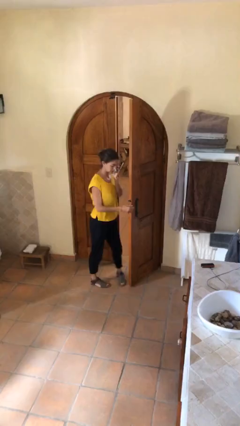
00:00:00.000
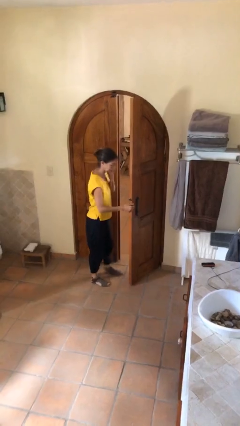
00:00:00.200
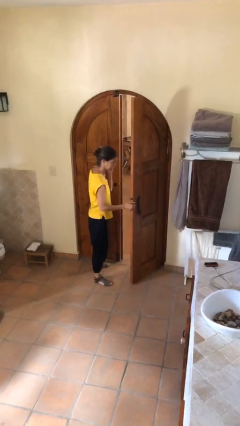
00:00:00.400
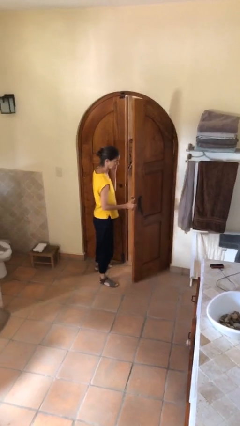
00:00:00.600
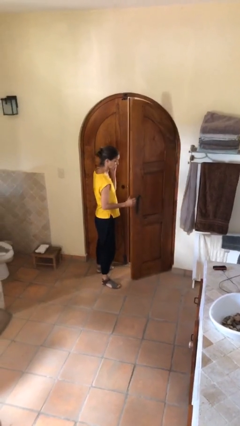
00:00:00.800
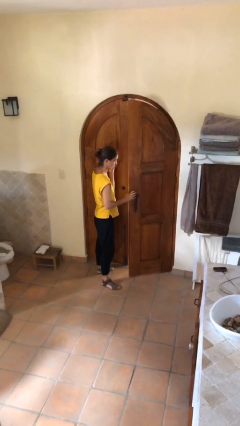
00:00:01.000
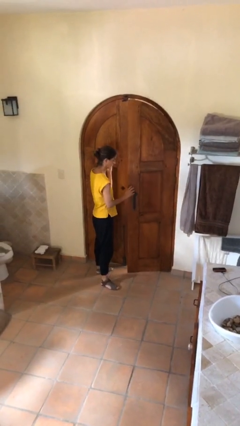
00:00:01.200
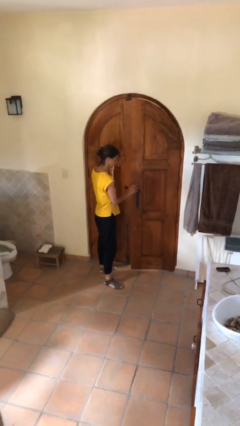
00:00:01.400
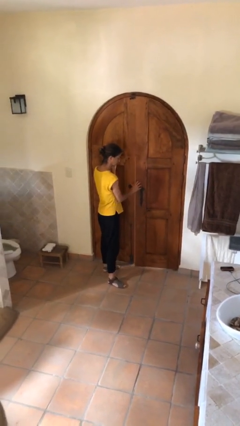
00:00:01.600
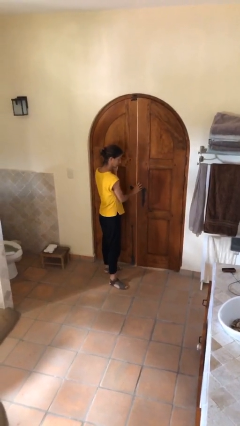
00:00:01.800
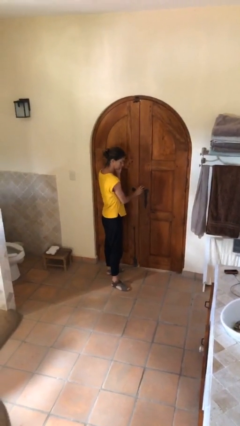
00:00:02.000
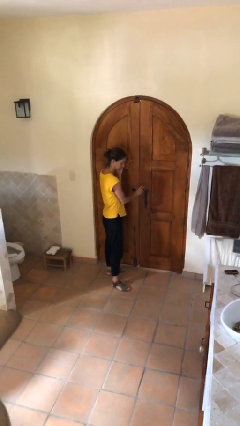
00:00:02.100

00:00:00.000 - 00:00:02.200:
person closes facility door

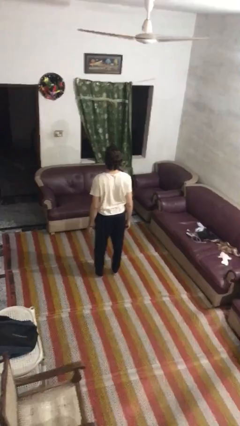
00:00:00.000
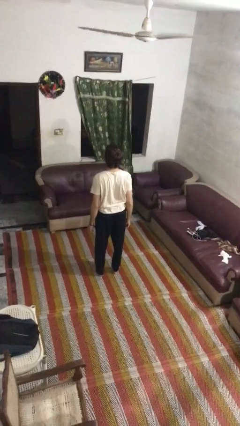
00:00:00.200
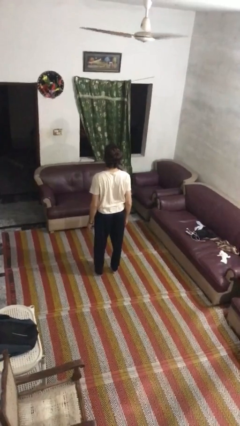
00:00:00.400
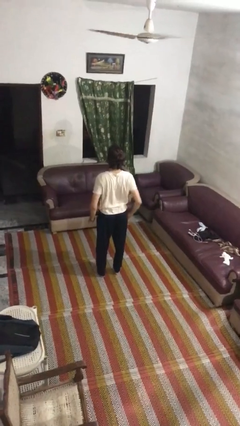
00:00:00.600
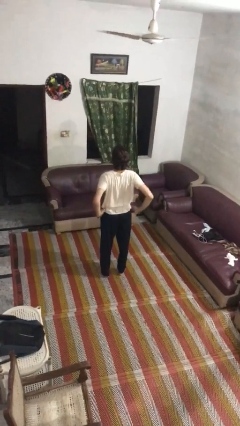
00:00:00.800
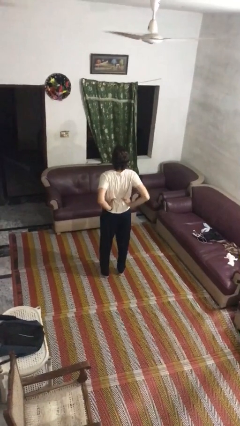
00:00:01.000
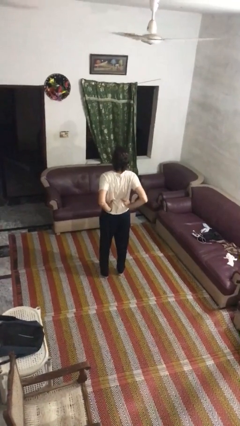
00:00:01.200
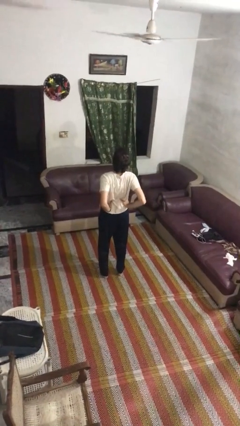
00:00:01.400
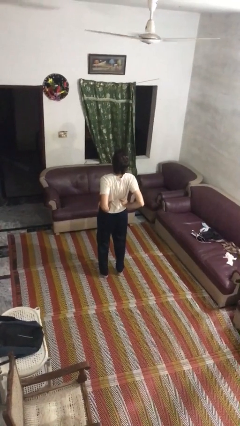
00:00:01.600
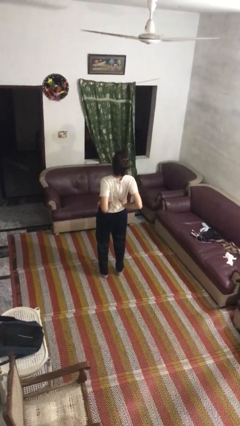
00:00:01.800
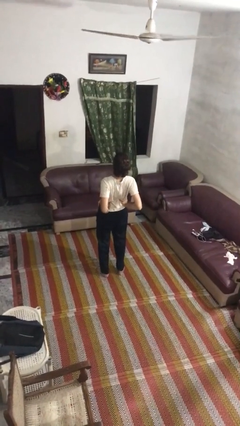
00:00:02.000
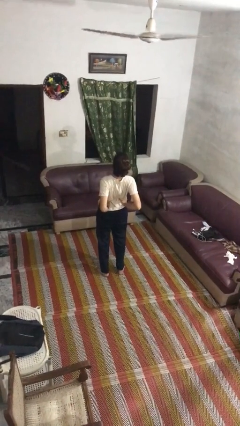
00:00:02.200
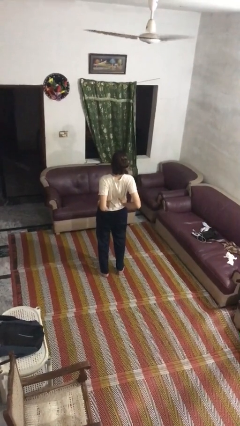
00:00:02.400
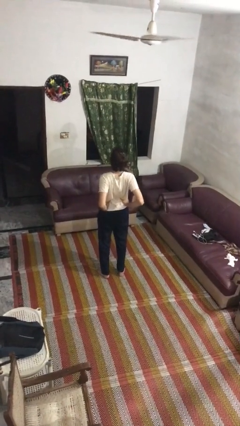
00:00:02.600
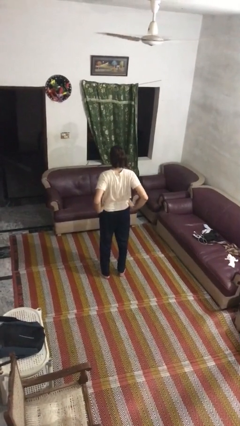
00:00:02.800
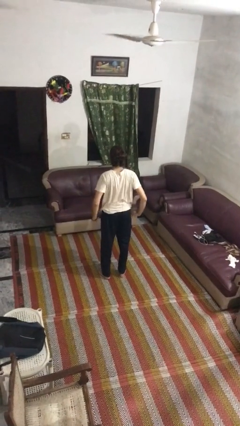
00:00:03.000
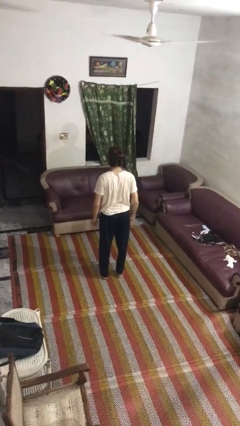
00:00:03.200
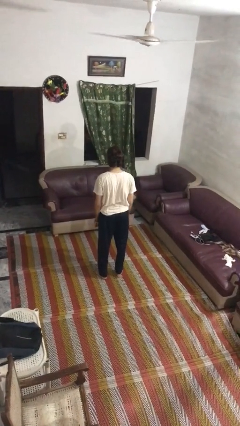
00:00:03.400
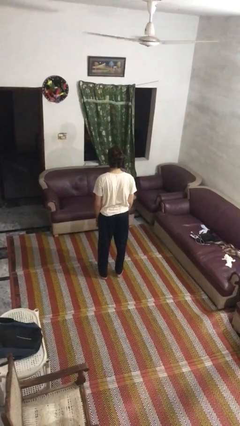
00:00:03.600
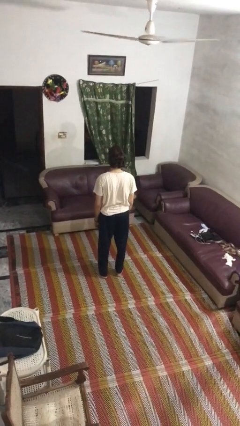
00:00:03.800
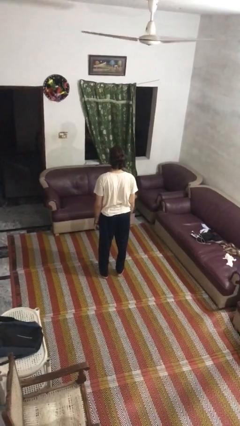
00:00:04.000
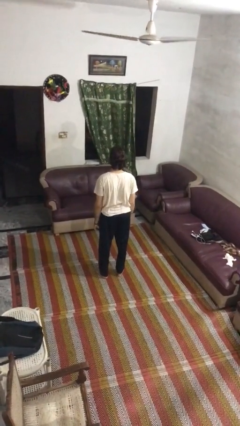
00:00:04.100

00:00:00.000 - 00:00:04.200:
person stretches back

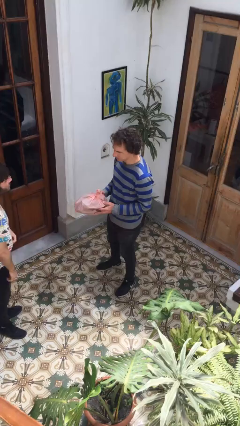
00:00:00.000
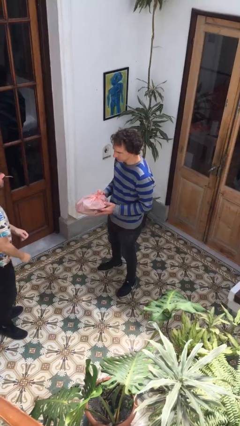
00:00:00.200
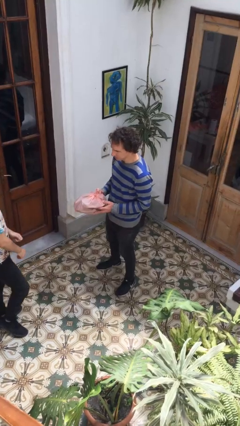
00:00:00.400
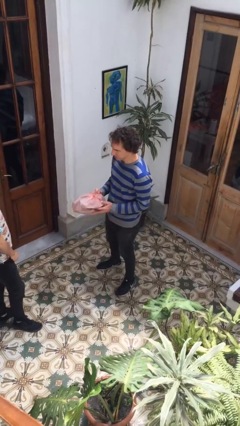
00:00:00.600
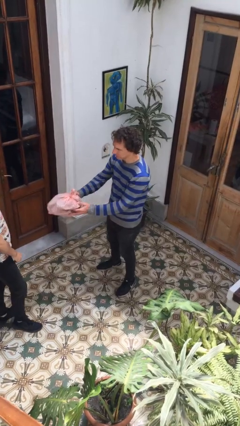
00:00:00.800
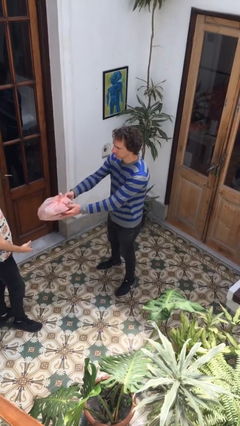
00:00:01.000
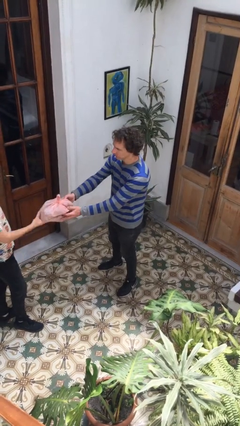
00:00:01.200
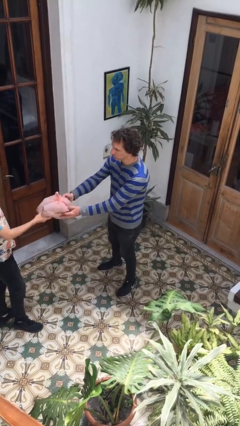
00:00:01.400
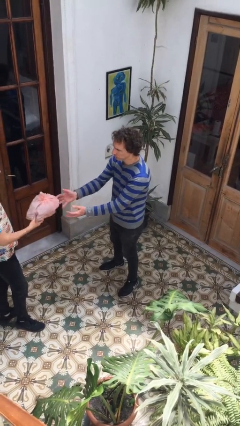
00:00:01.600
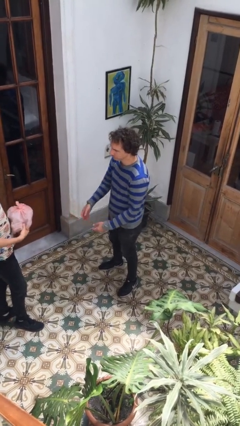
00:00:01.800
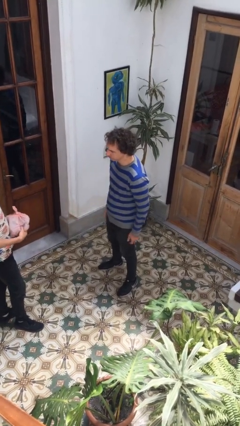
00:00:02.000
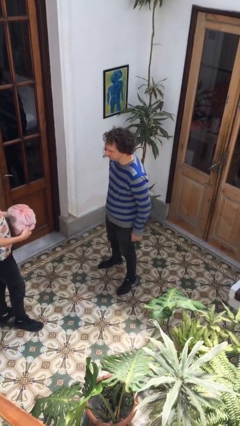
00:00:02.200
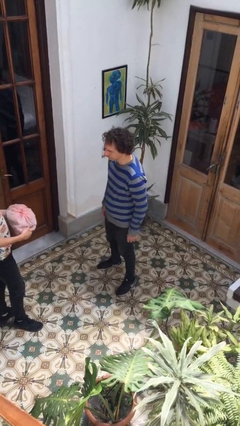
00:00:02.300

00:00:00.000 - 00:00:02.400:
person transfers object to person

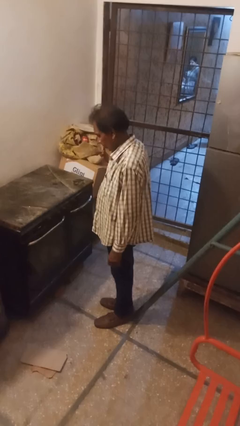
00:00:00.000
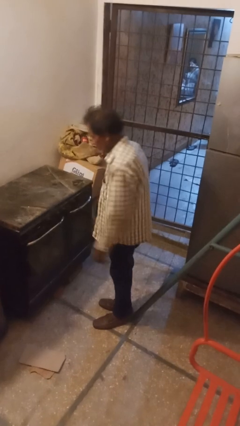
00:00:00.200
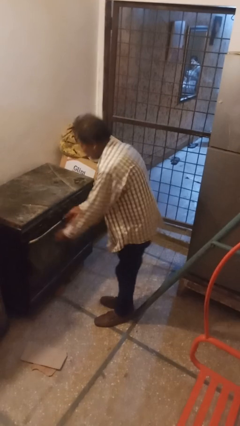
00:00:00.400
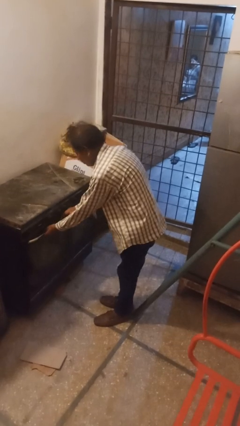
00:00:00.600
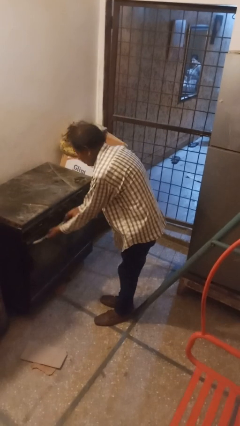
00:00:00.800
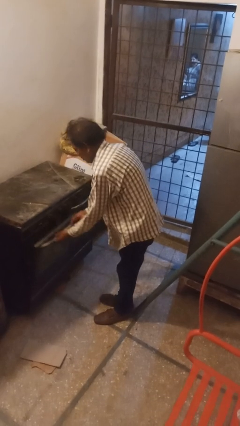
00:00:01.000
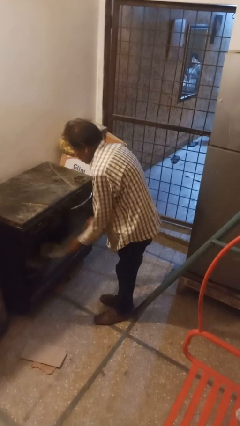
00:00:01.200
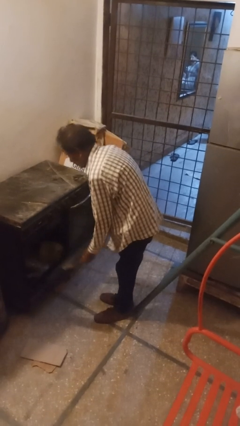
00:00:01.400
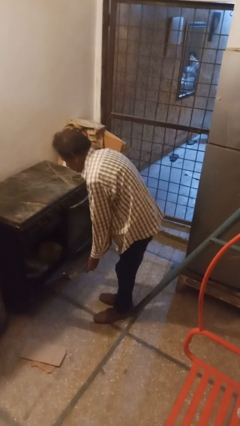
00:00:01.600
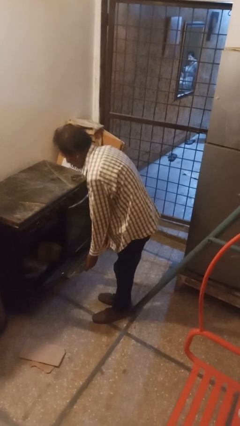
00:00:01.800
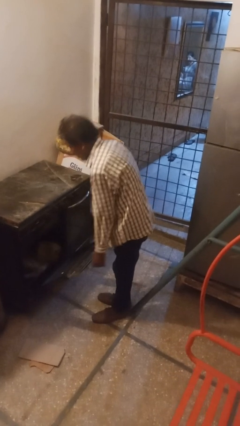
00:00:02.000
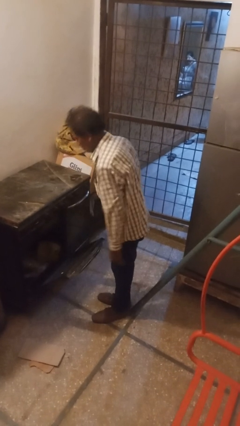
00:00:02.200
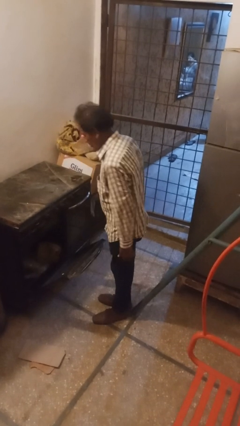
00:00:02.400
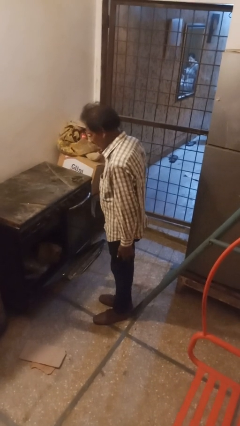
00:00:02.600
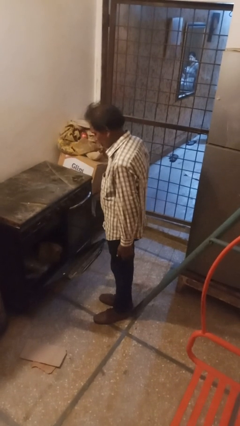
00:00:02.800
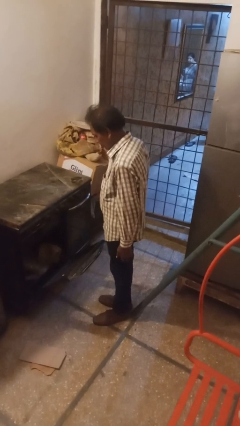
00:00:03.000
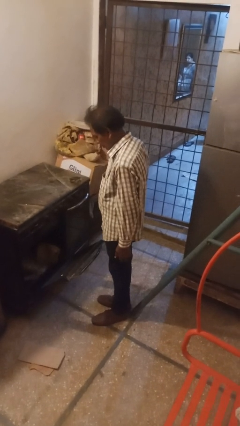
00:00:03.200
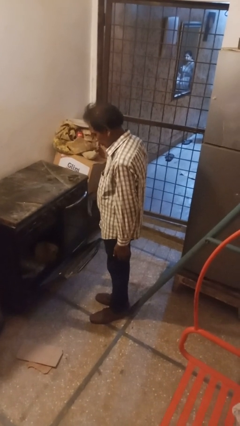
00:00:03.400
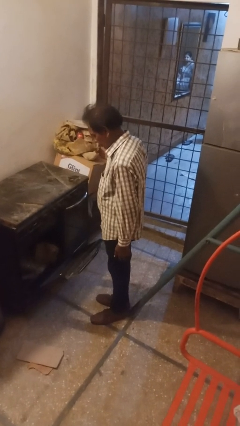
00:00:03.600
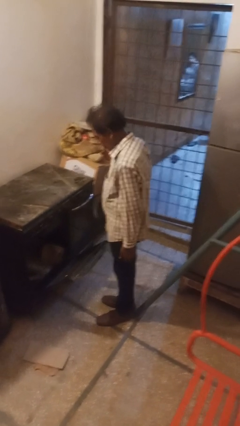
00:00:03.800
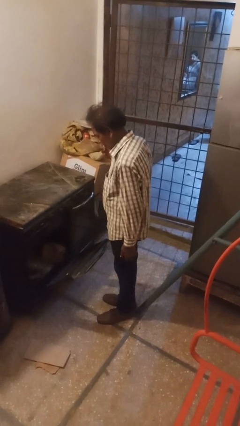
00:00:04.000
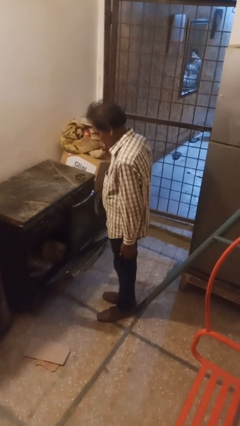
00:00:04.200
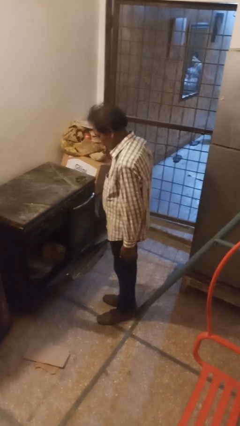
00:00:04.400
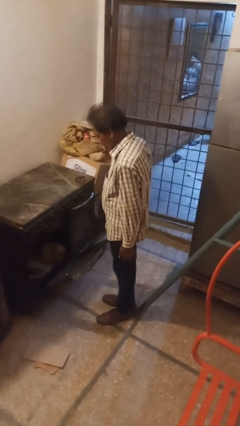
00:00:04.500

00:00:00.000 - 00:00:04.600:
person opens oven door

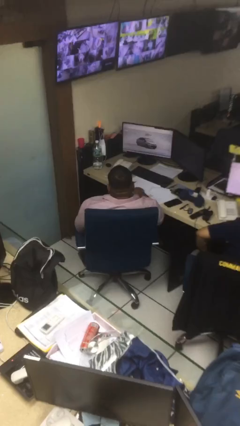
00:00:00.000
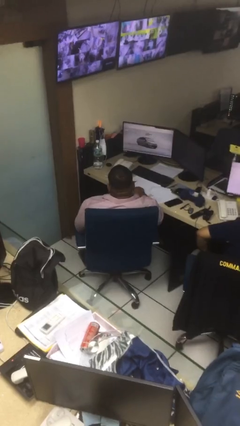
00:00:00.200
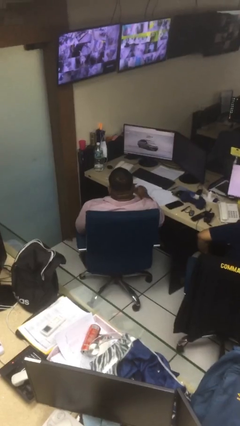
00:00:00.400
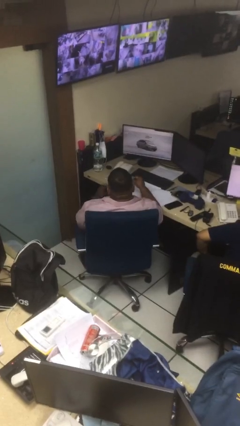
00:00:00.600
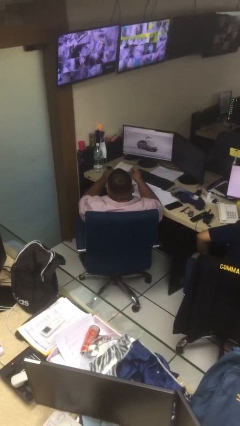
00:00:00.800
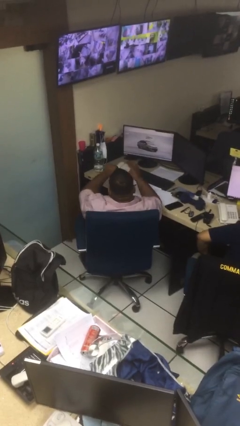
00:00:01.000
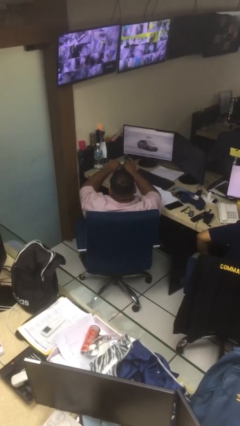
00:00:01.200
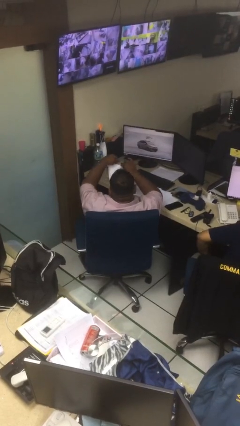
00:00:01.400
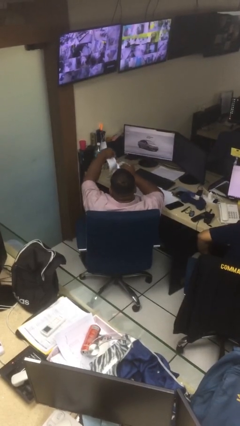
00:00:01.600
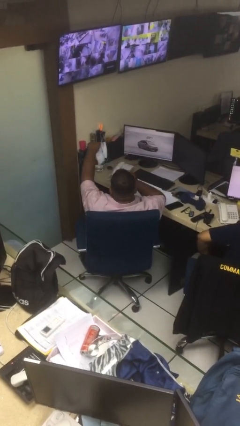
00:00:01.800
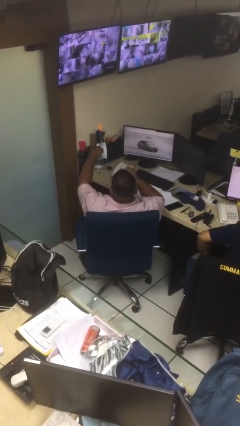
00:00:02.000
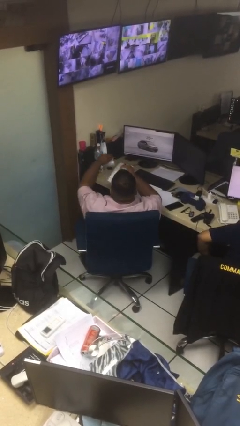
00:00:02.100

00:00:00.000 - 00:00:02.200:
person tears paper

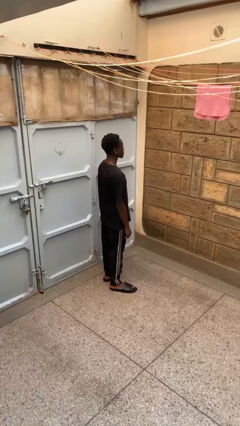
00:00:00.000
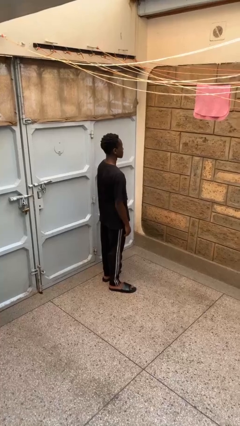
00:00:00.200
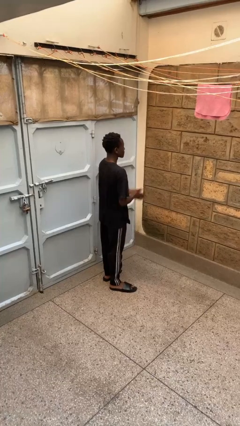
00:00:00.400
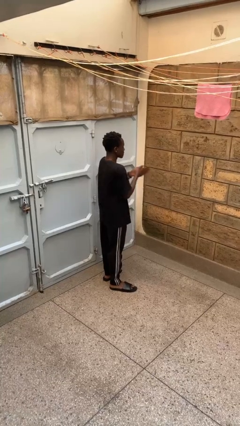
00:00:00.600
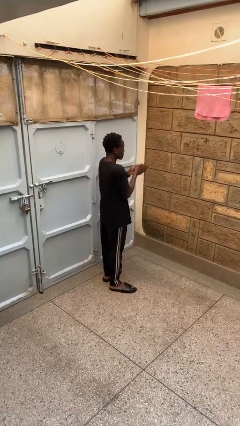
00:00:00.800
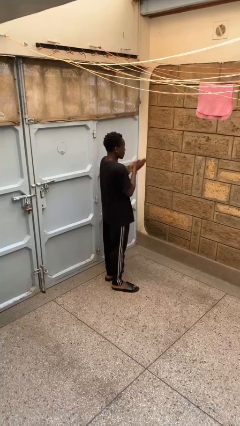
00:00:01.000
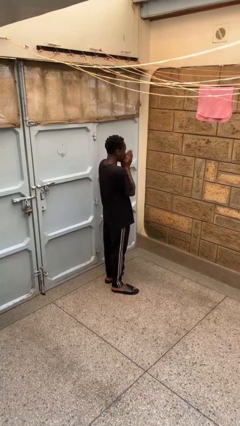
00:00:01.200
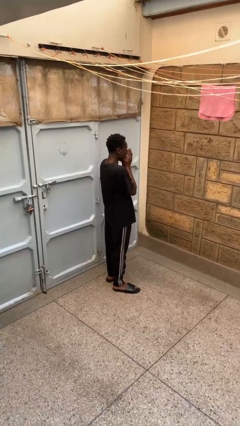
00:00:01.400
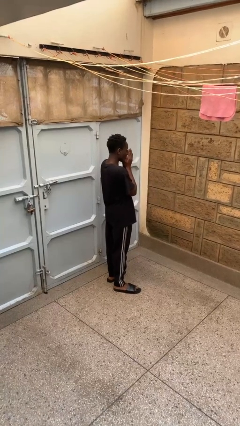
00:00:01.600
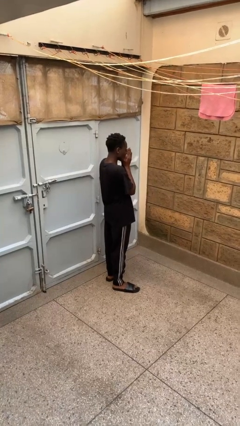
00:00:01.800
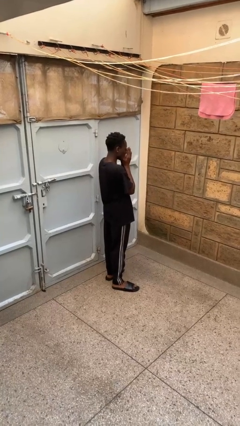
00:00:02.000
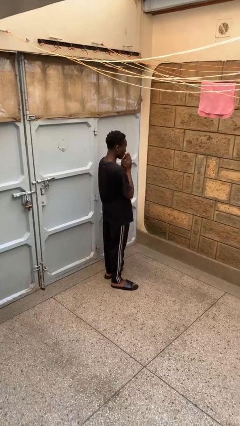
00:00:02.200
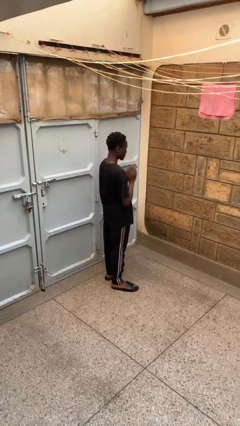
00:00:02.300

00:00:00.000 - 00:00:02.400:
person blows into hands
